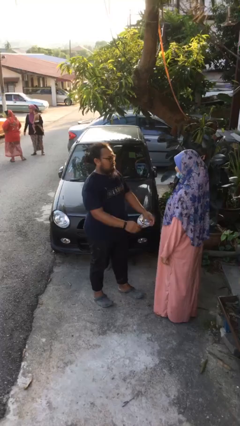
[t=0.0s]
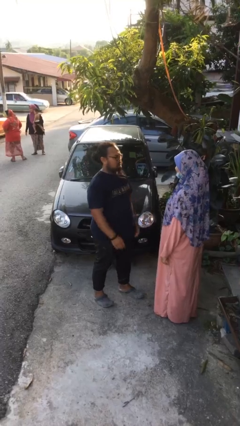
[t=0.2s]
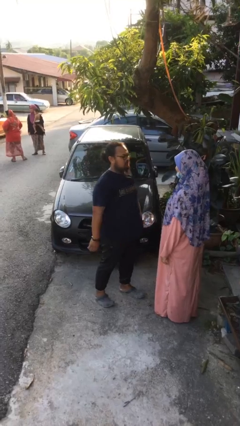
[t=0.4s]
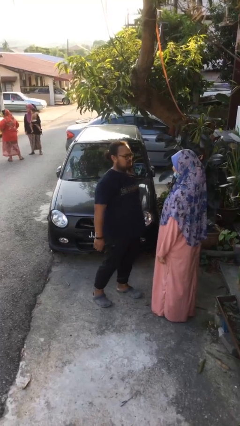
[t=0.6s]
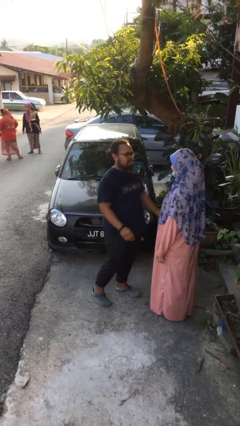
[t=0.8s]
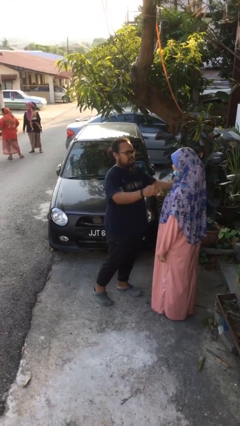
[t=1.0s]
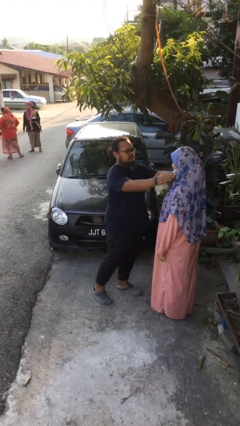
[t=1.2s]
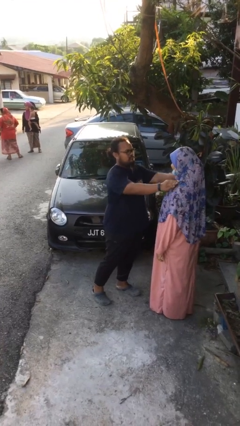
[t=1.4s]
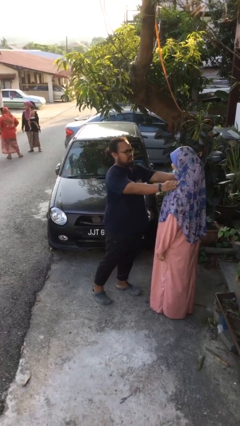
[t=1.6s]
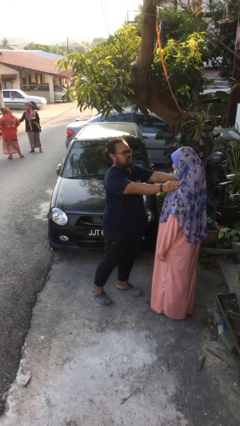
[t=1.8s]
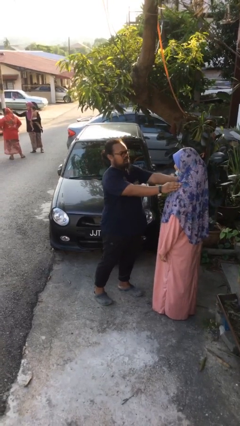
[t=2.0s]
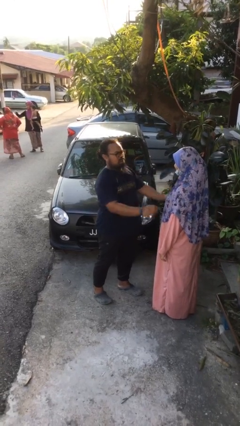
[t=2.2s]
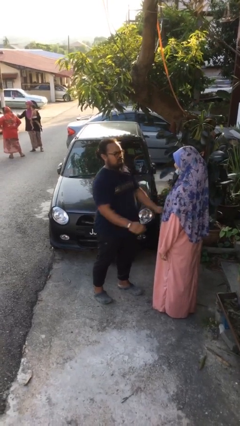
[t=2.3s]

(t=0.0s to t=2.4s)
person pounds shoulders of person

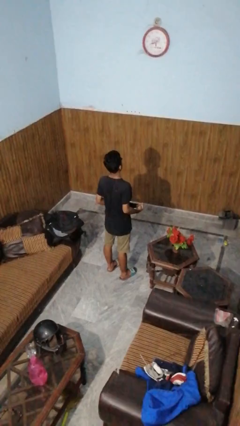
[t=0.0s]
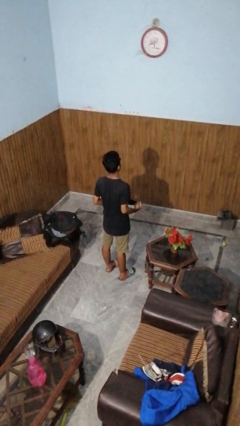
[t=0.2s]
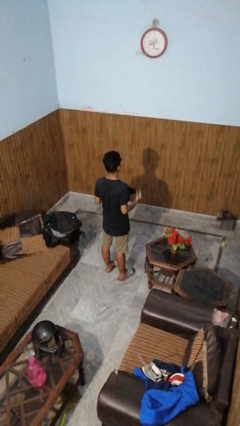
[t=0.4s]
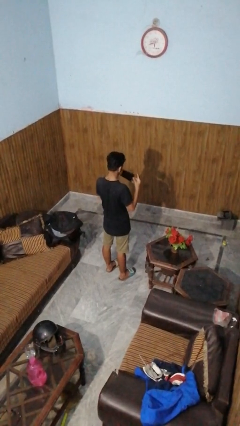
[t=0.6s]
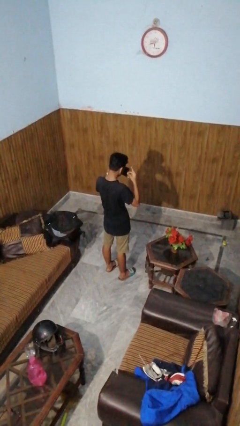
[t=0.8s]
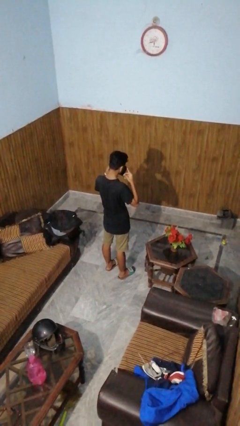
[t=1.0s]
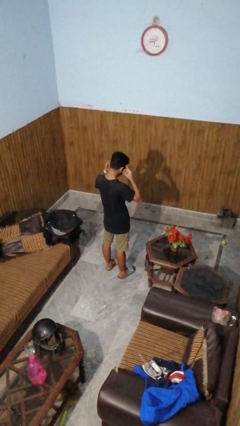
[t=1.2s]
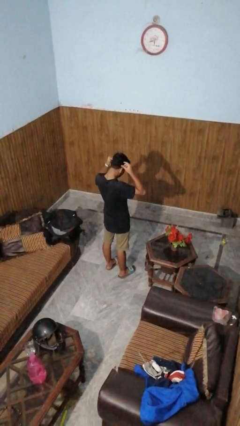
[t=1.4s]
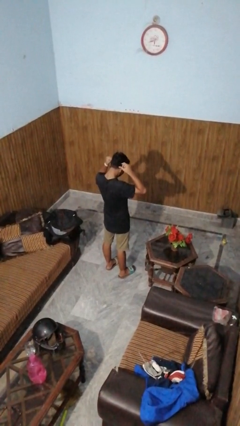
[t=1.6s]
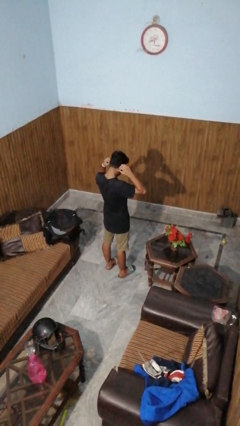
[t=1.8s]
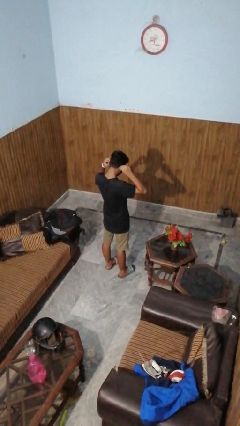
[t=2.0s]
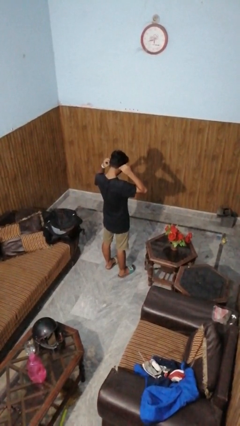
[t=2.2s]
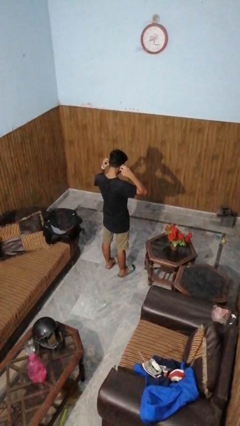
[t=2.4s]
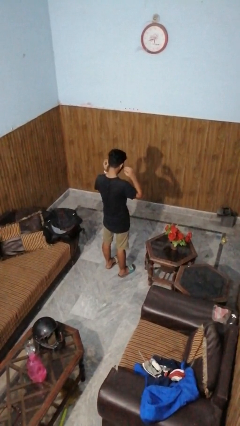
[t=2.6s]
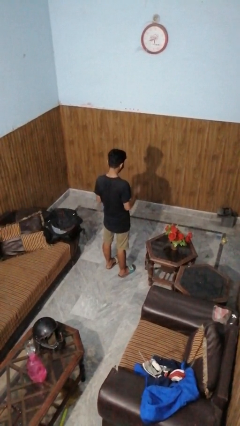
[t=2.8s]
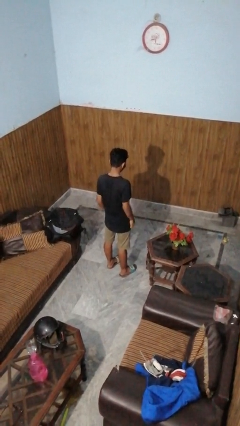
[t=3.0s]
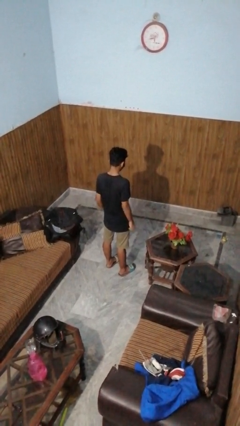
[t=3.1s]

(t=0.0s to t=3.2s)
person puts on facemask

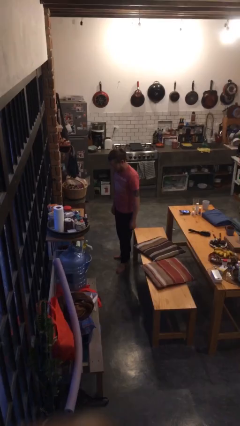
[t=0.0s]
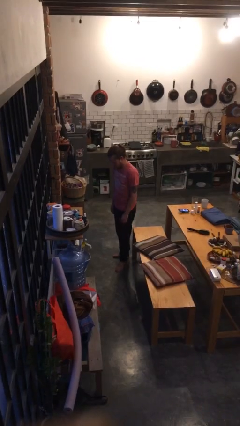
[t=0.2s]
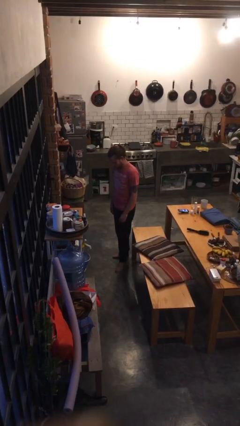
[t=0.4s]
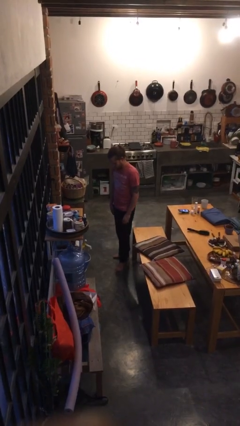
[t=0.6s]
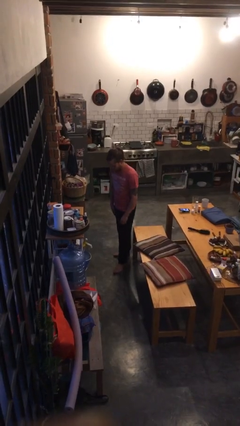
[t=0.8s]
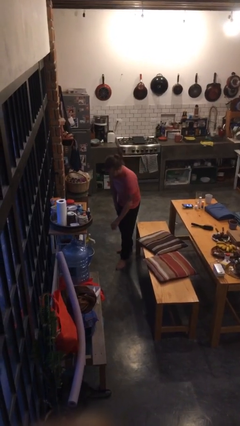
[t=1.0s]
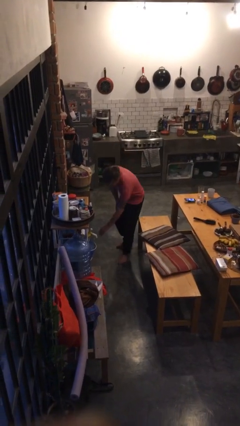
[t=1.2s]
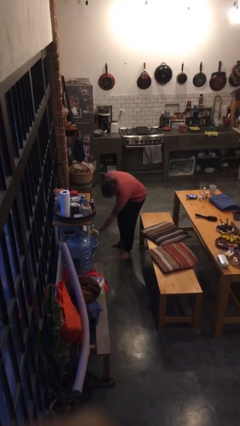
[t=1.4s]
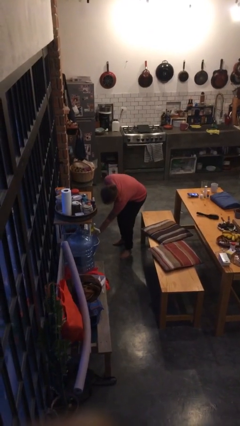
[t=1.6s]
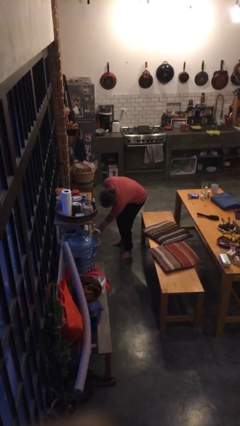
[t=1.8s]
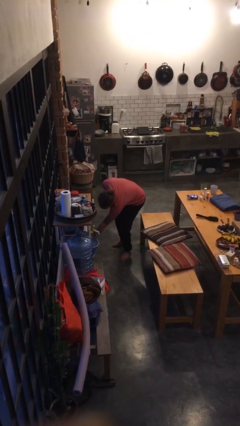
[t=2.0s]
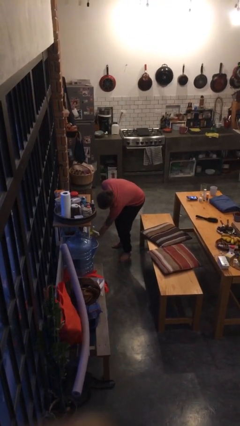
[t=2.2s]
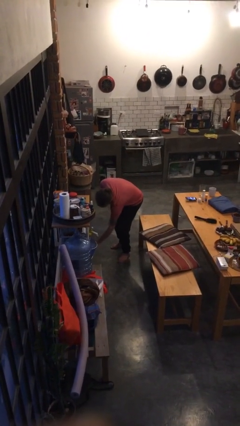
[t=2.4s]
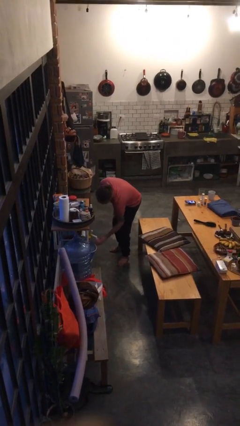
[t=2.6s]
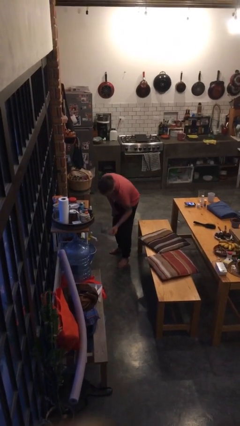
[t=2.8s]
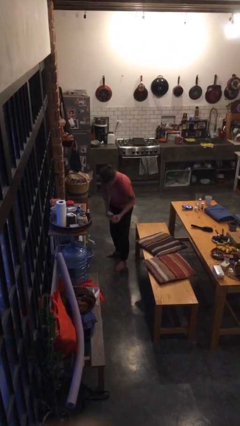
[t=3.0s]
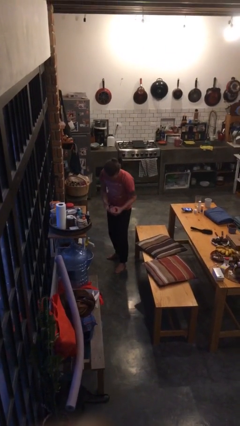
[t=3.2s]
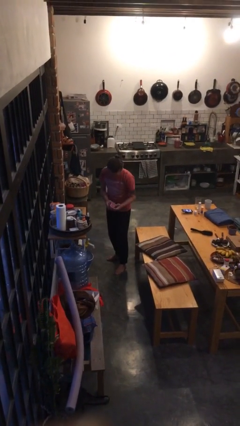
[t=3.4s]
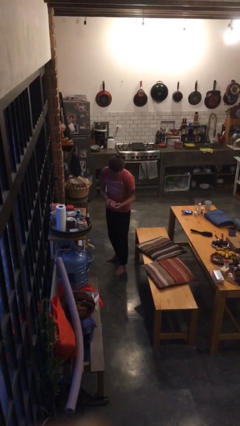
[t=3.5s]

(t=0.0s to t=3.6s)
person picks up object from cabinet

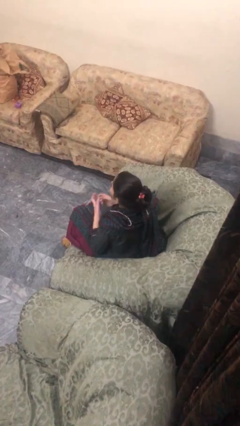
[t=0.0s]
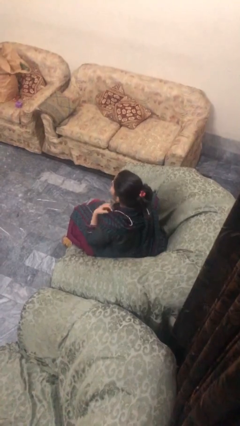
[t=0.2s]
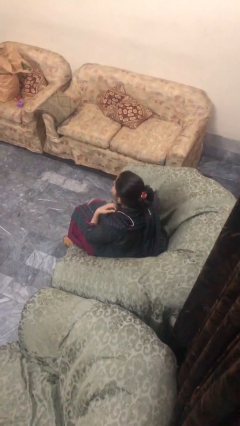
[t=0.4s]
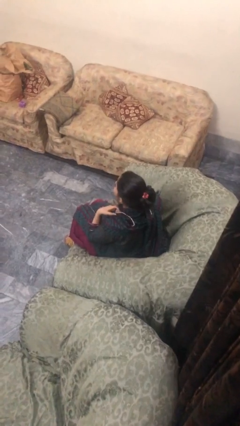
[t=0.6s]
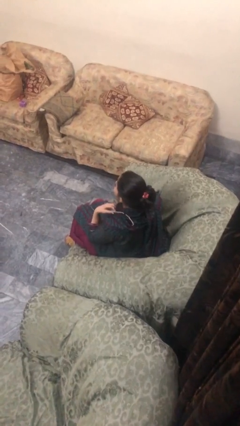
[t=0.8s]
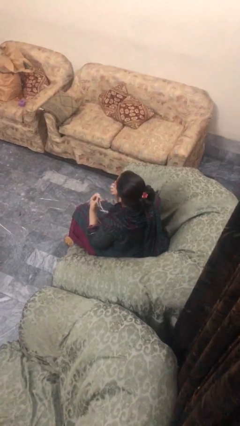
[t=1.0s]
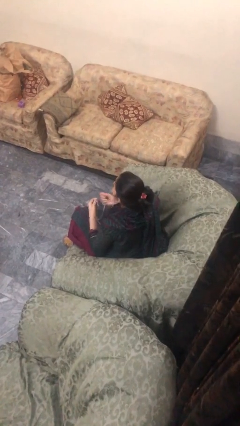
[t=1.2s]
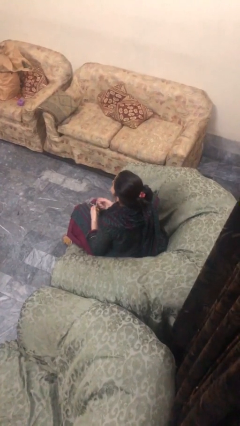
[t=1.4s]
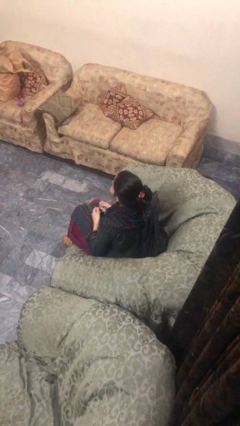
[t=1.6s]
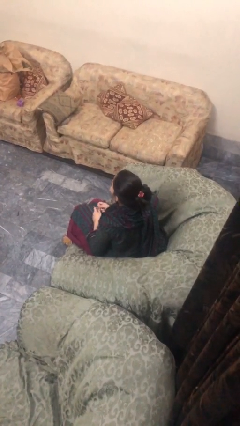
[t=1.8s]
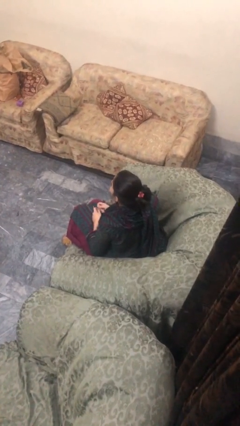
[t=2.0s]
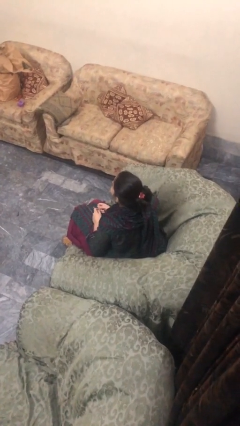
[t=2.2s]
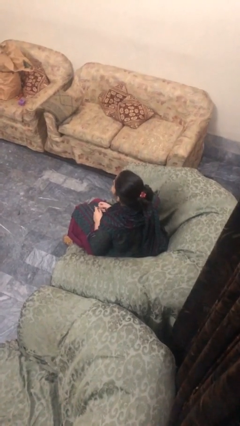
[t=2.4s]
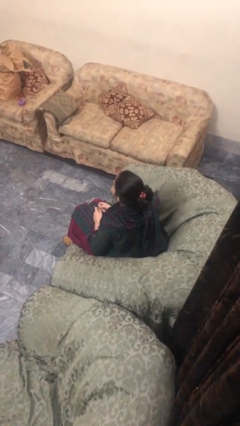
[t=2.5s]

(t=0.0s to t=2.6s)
person takes off necklace

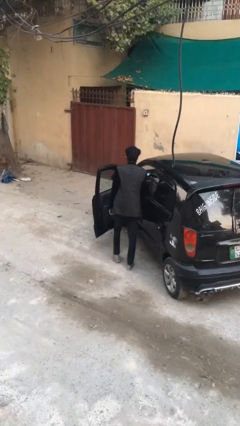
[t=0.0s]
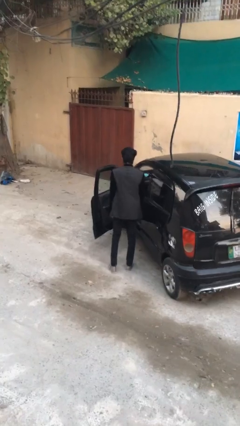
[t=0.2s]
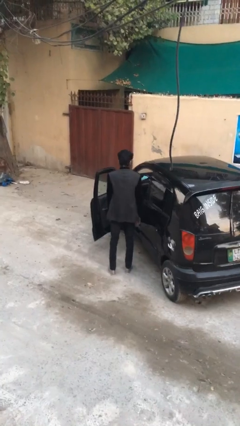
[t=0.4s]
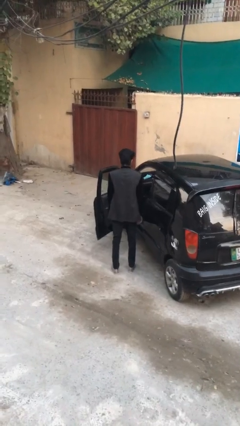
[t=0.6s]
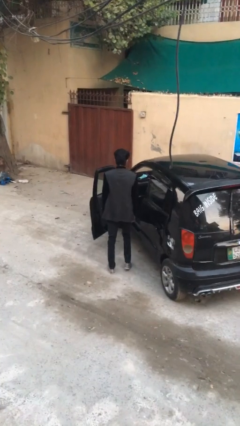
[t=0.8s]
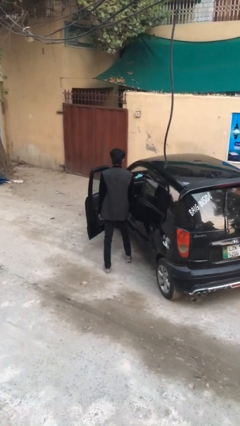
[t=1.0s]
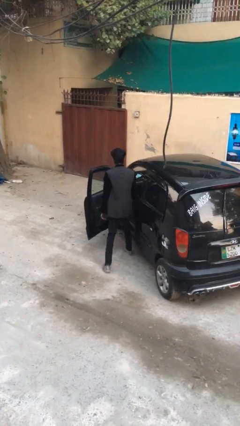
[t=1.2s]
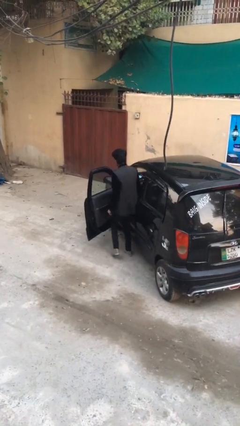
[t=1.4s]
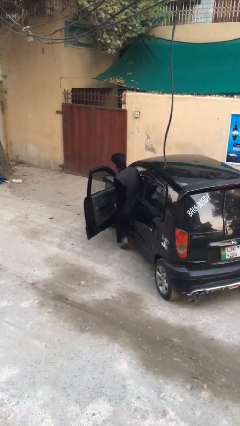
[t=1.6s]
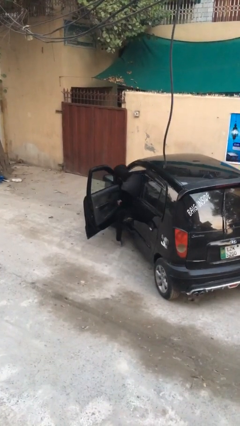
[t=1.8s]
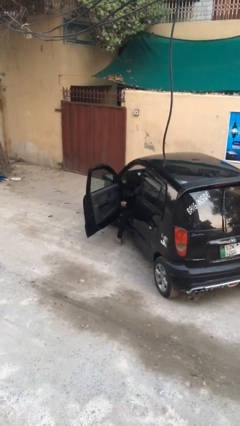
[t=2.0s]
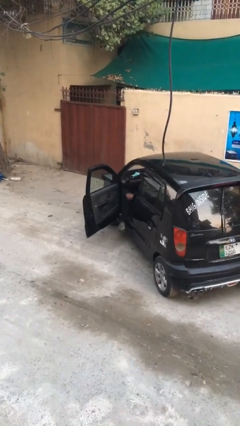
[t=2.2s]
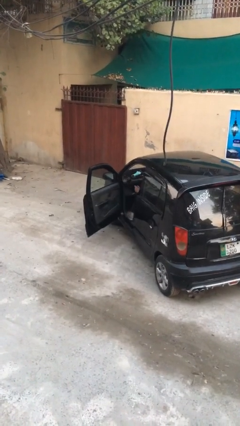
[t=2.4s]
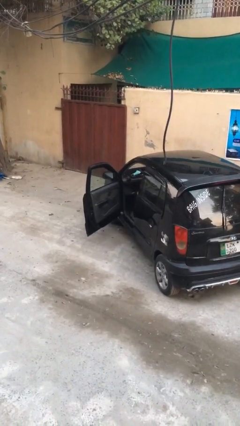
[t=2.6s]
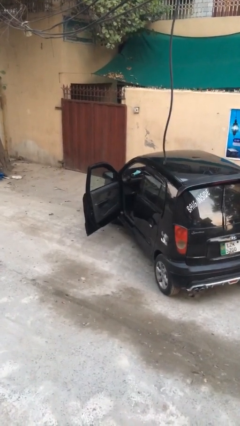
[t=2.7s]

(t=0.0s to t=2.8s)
person enters car

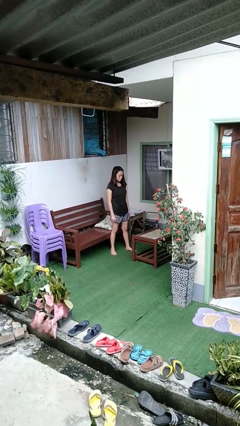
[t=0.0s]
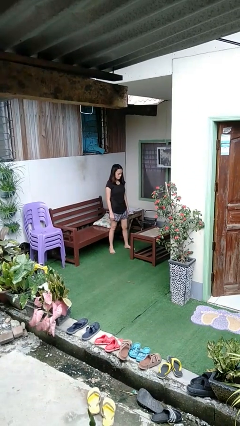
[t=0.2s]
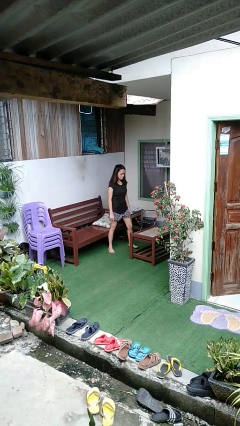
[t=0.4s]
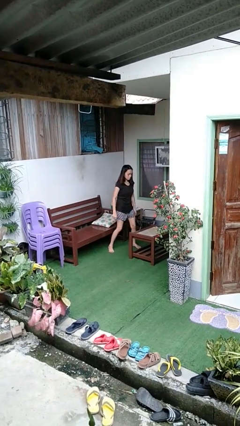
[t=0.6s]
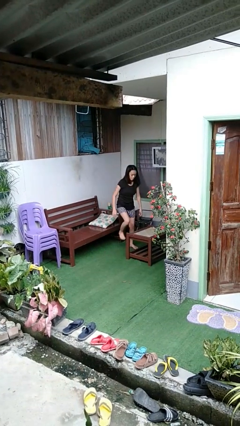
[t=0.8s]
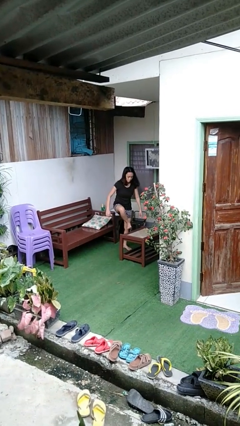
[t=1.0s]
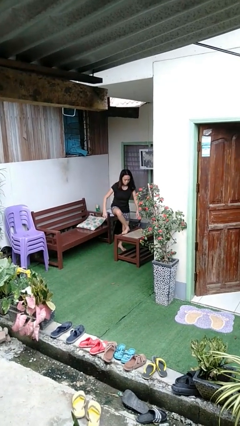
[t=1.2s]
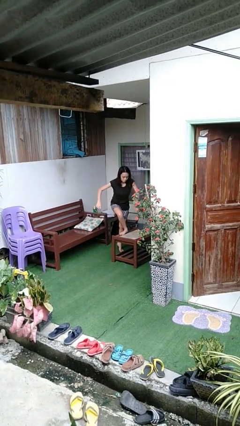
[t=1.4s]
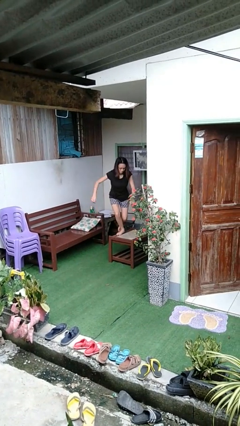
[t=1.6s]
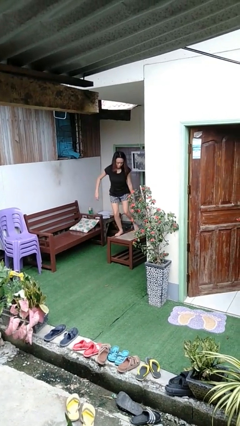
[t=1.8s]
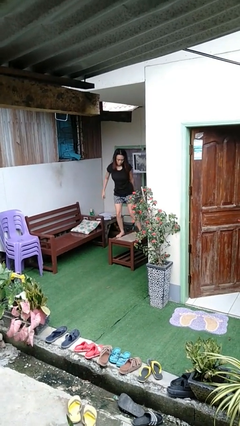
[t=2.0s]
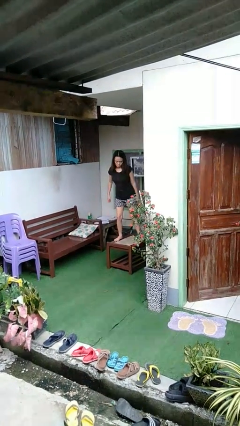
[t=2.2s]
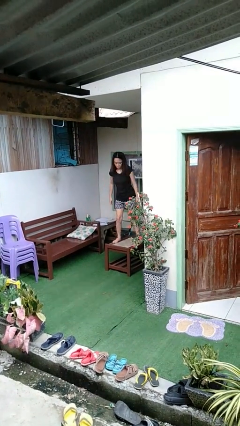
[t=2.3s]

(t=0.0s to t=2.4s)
person climbs on table

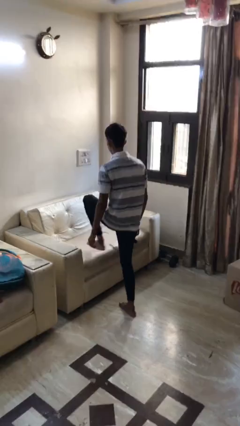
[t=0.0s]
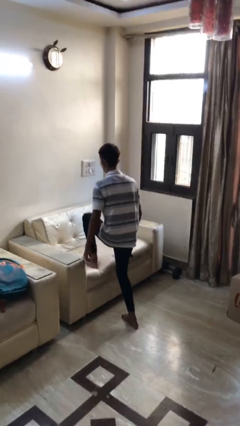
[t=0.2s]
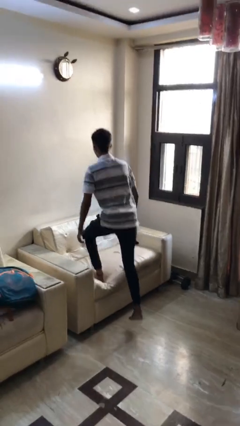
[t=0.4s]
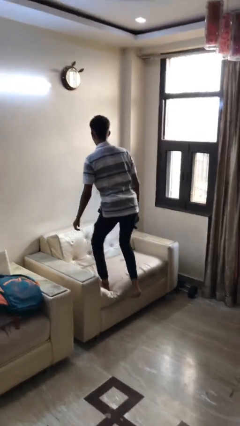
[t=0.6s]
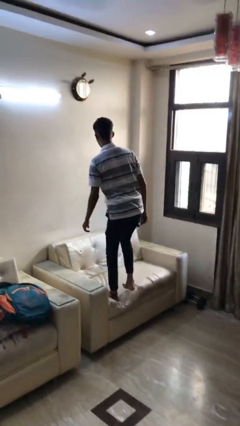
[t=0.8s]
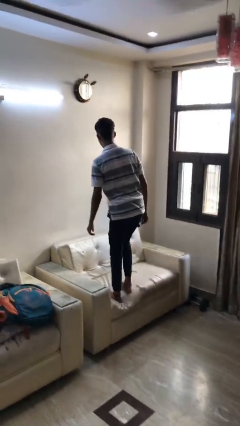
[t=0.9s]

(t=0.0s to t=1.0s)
person climbs on couch
